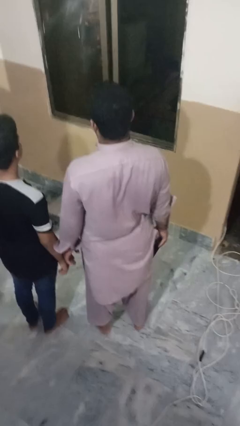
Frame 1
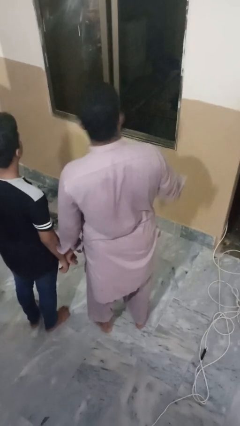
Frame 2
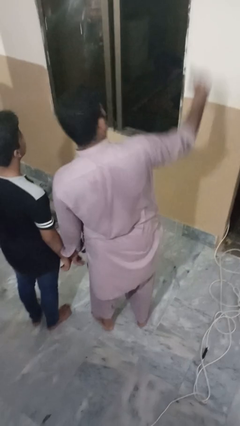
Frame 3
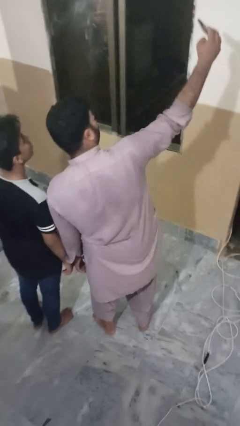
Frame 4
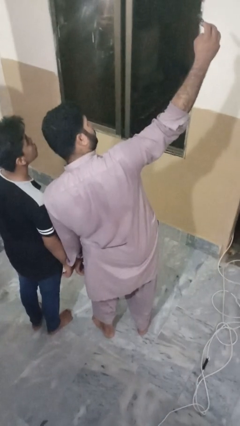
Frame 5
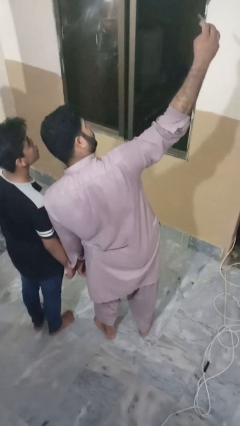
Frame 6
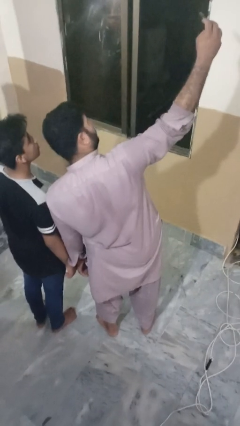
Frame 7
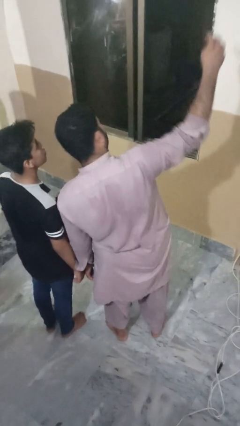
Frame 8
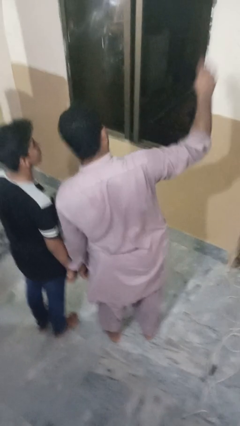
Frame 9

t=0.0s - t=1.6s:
person takes selfie with person

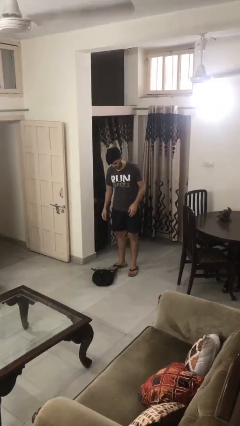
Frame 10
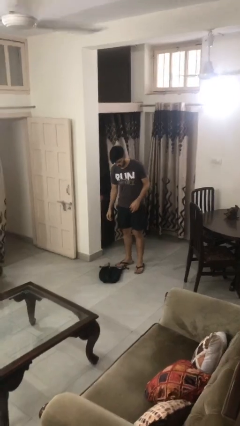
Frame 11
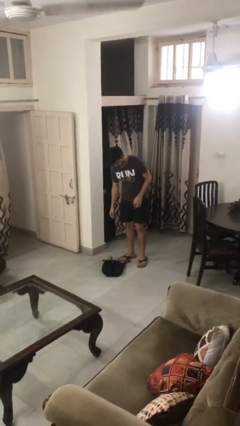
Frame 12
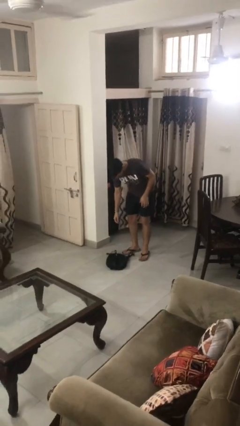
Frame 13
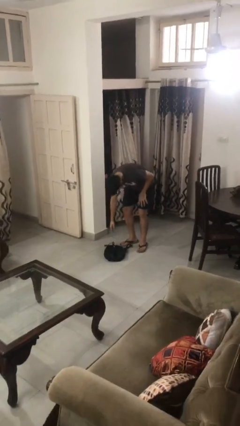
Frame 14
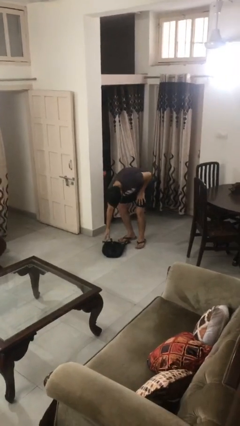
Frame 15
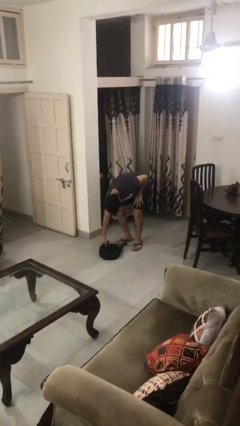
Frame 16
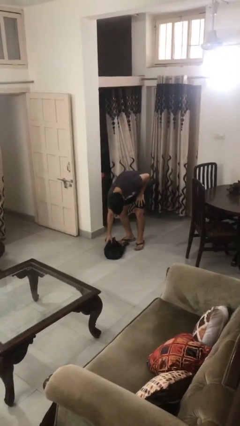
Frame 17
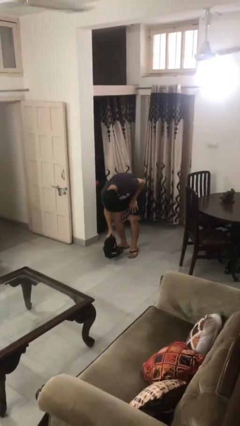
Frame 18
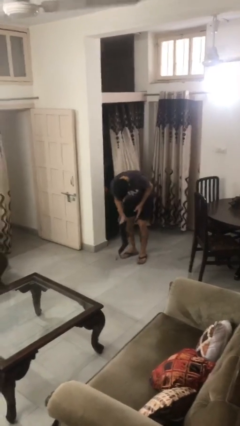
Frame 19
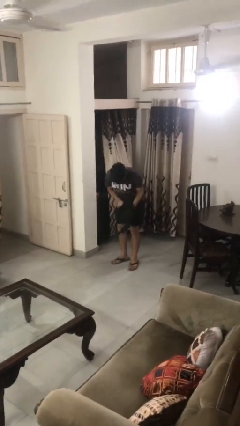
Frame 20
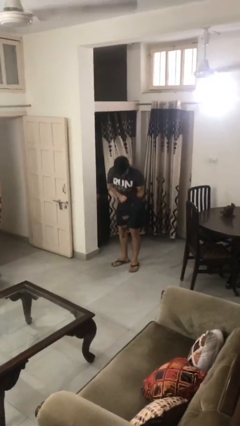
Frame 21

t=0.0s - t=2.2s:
person picks up object from floor

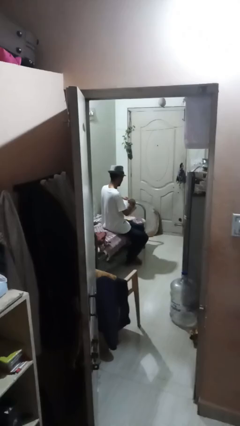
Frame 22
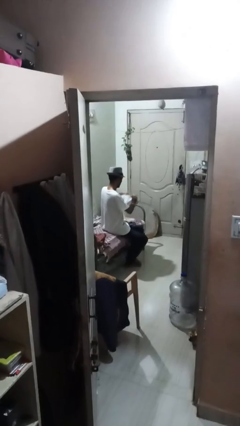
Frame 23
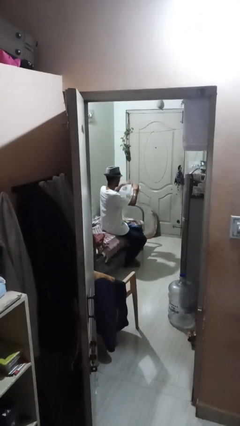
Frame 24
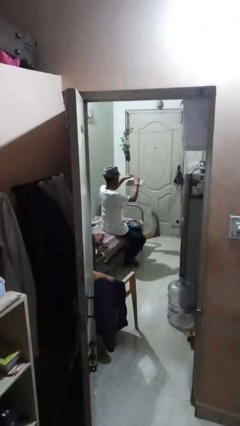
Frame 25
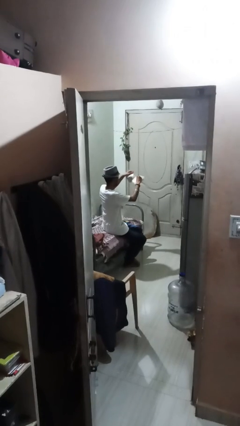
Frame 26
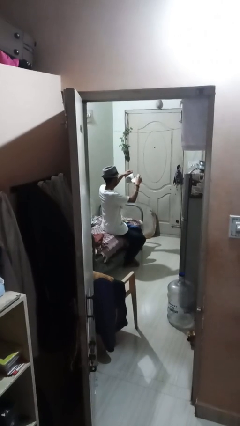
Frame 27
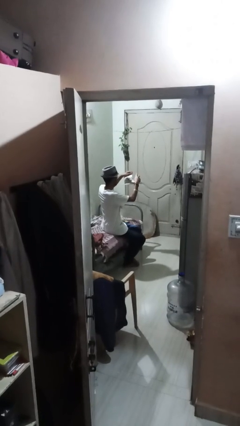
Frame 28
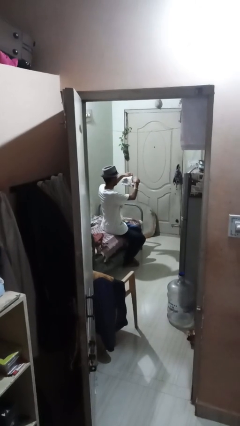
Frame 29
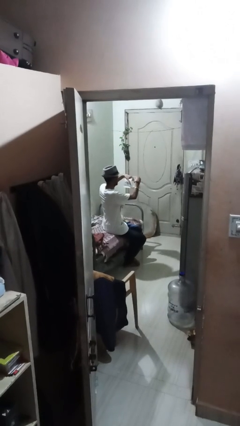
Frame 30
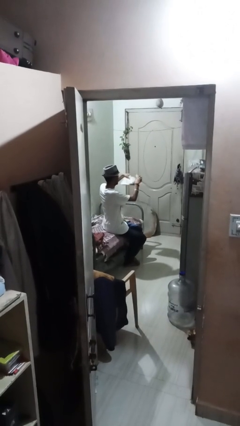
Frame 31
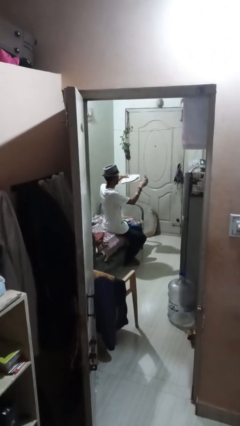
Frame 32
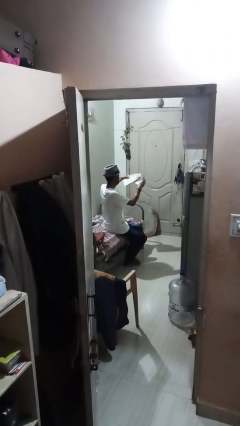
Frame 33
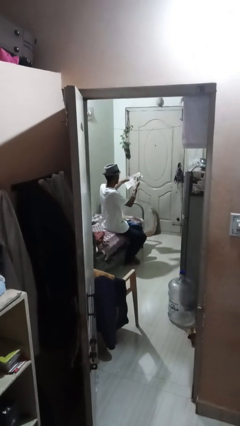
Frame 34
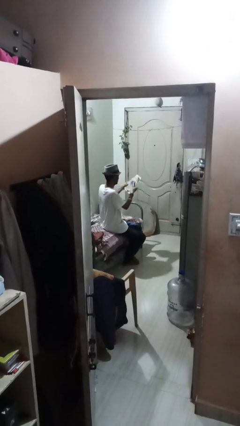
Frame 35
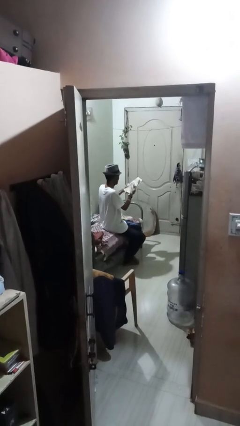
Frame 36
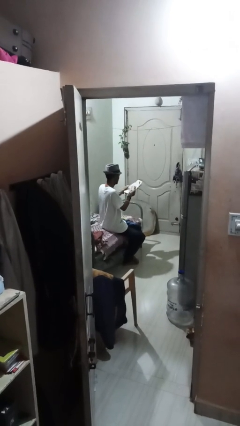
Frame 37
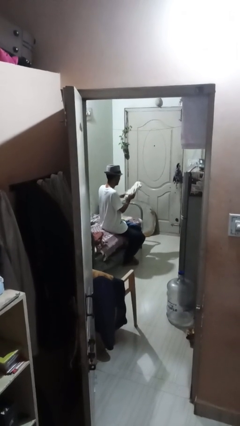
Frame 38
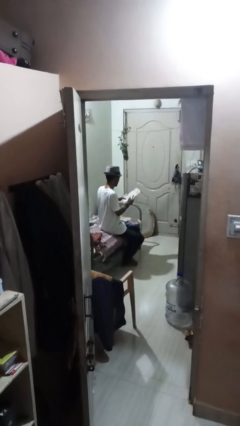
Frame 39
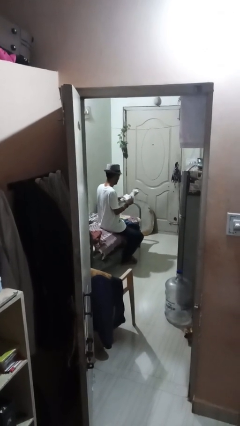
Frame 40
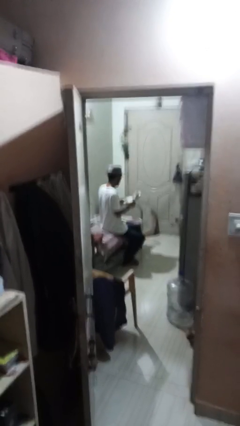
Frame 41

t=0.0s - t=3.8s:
person tears paper

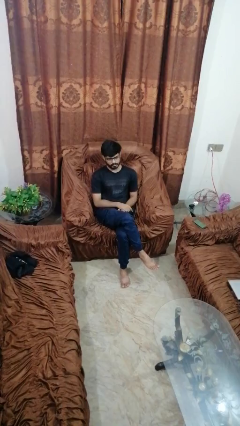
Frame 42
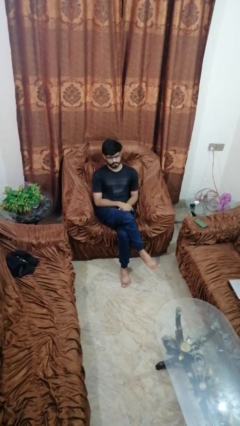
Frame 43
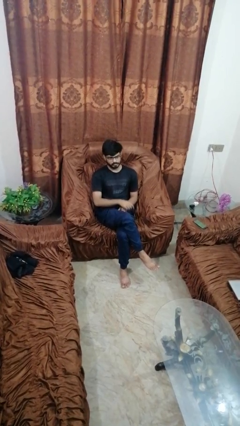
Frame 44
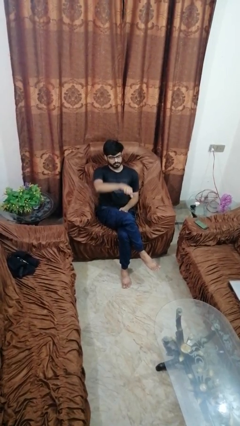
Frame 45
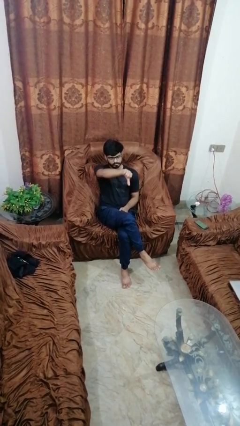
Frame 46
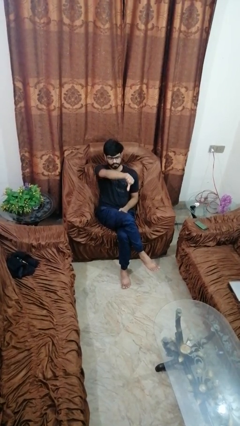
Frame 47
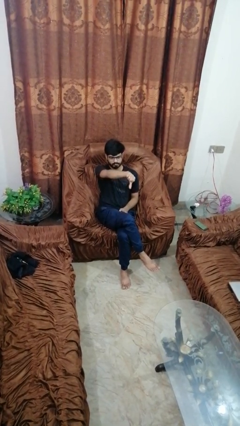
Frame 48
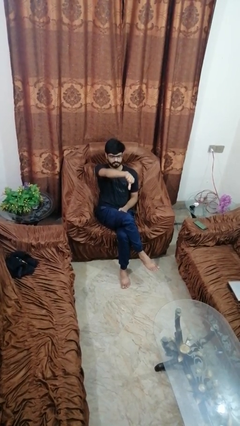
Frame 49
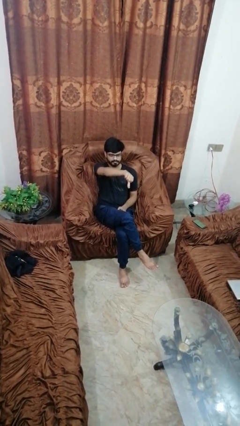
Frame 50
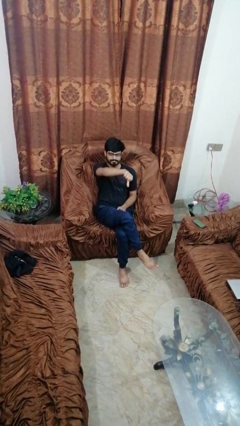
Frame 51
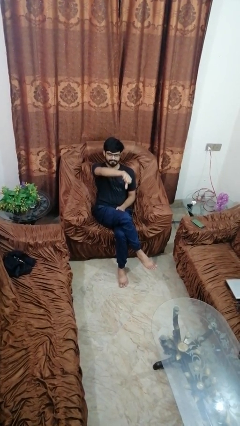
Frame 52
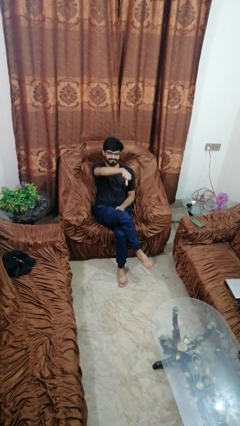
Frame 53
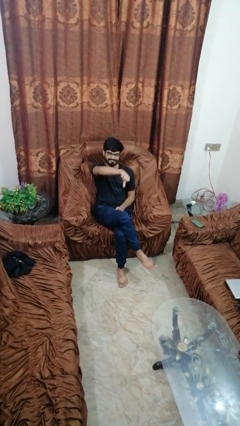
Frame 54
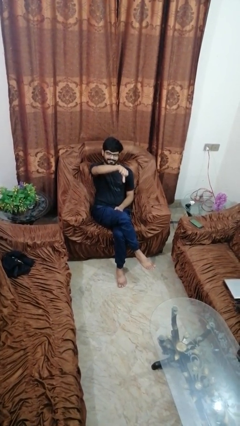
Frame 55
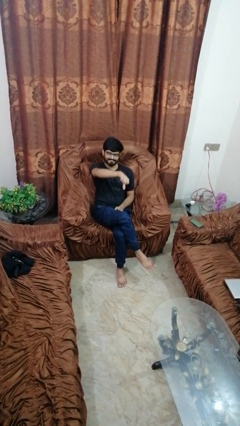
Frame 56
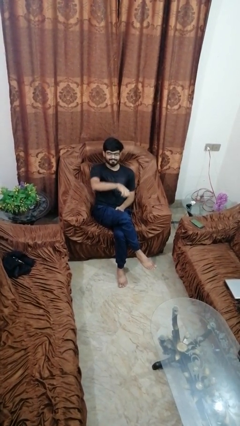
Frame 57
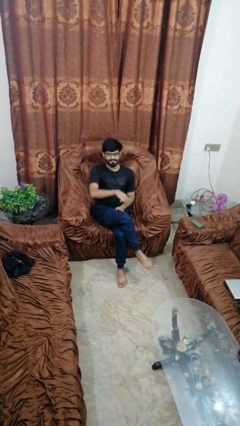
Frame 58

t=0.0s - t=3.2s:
person gestures thumbs down

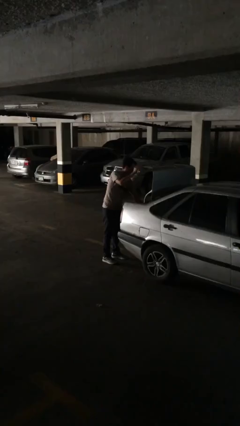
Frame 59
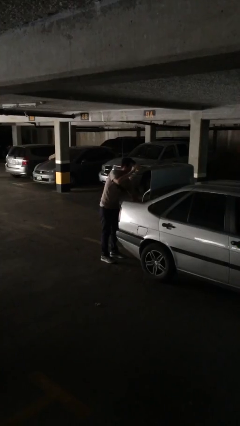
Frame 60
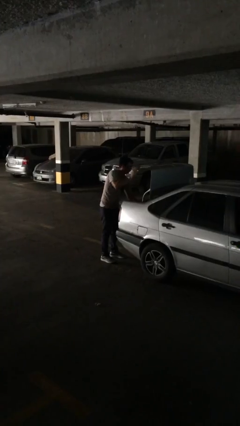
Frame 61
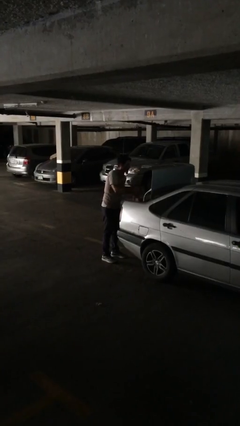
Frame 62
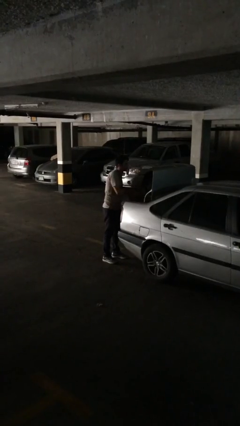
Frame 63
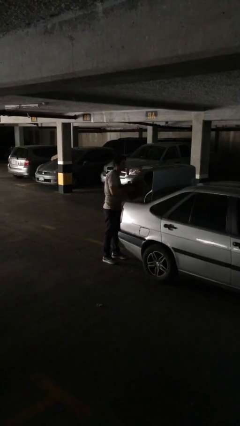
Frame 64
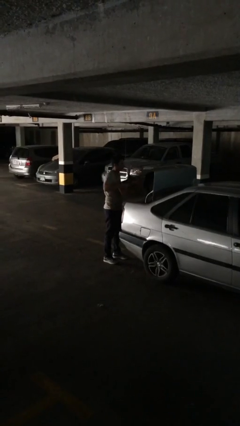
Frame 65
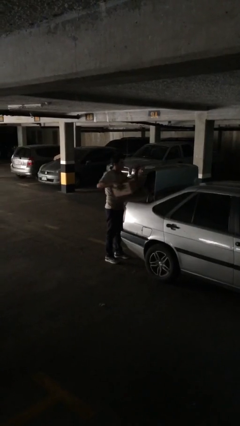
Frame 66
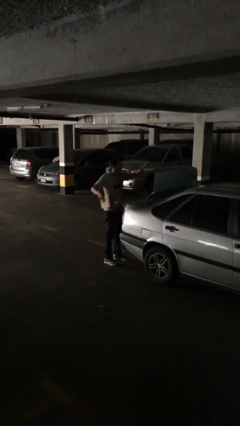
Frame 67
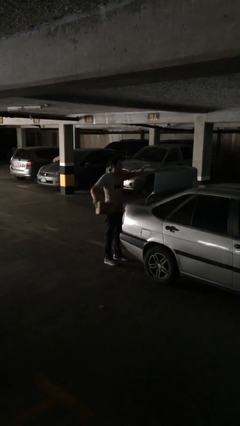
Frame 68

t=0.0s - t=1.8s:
person unloads car

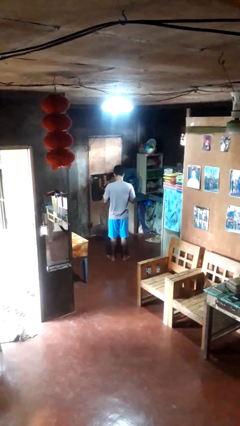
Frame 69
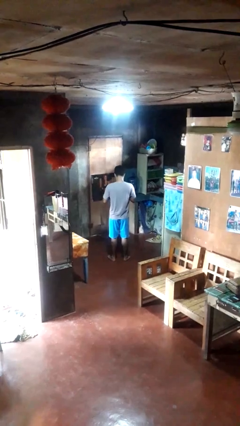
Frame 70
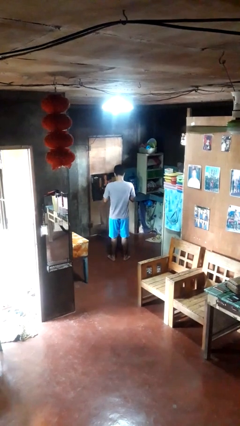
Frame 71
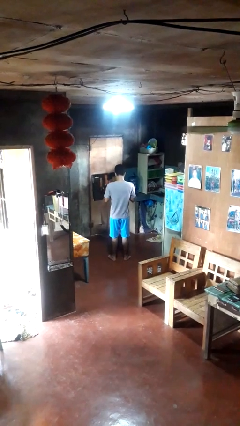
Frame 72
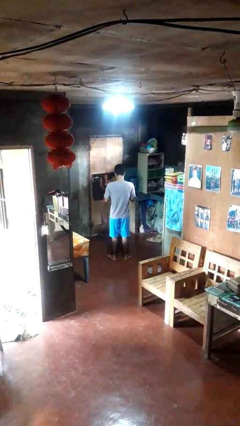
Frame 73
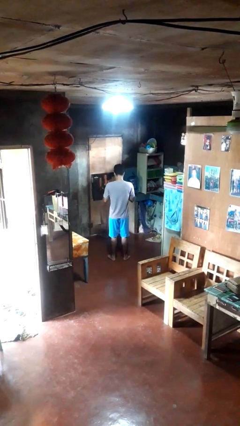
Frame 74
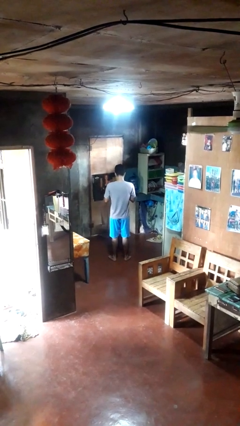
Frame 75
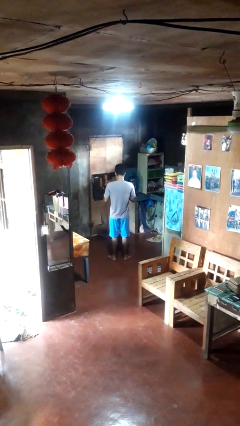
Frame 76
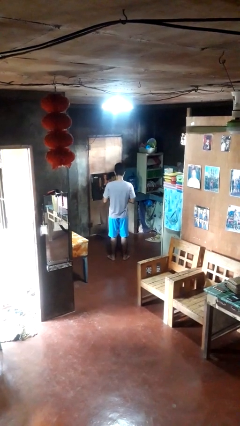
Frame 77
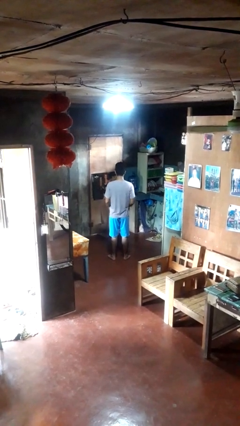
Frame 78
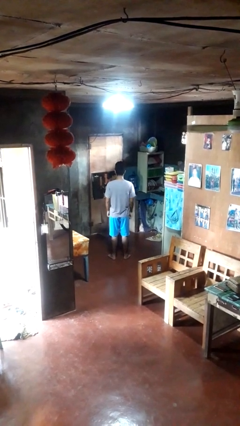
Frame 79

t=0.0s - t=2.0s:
person unbuttons shirt

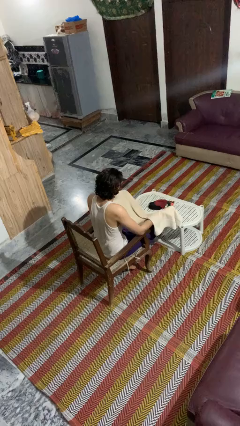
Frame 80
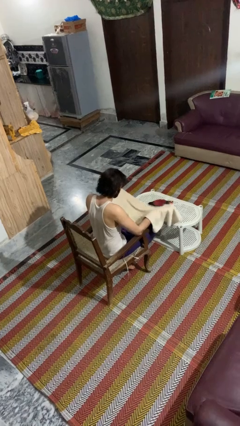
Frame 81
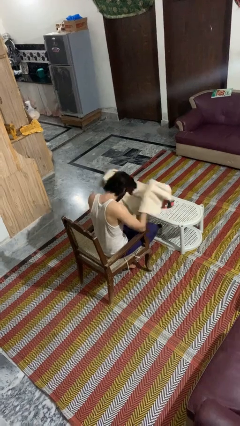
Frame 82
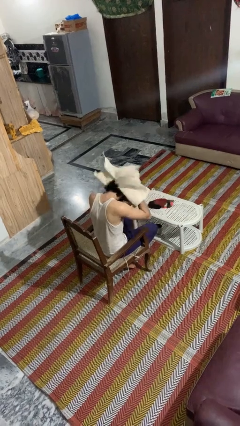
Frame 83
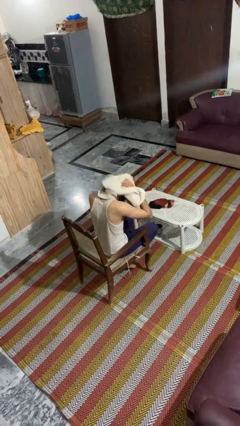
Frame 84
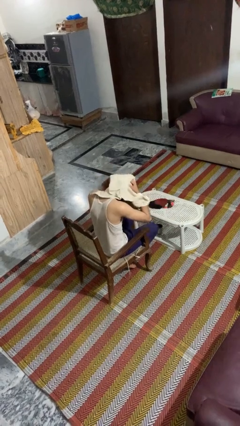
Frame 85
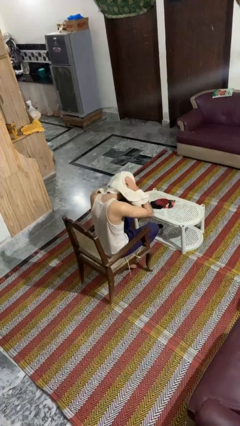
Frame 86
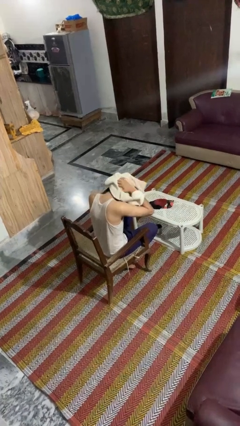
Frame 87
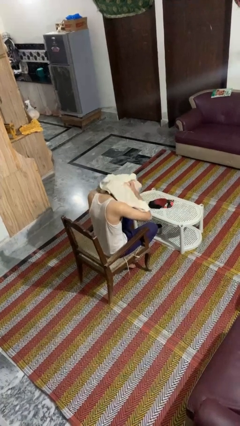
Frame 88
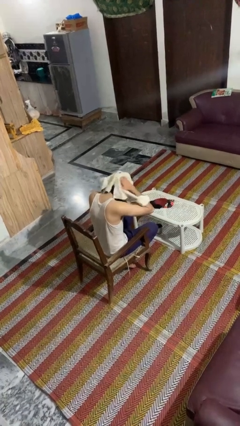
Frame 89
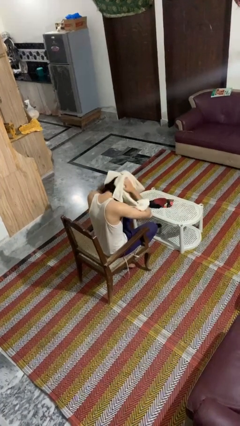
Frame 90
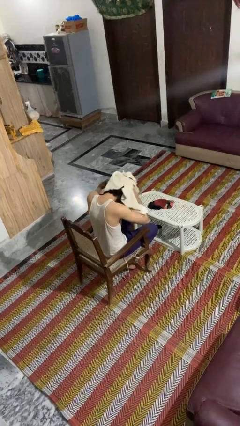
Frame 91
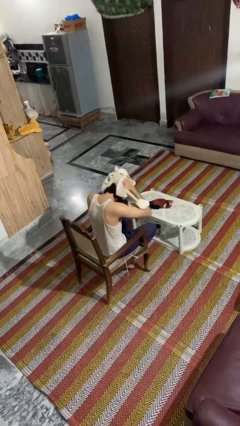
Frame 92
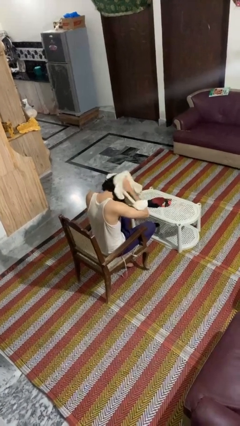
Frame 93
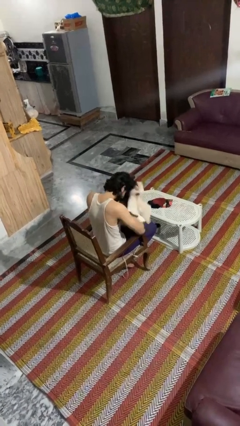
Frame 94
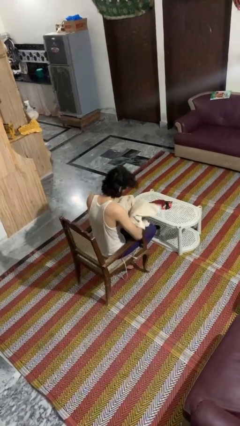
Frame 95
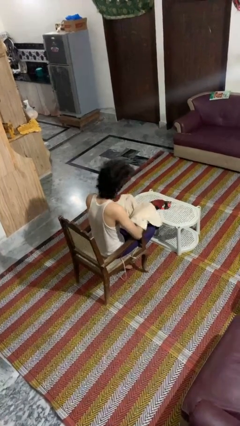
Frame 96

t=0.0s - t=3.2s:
person dries hair with towel
